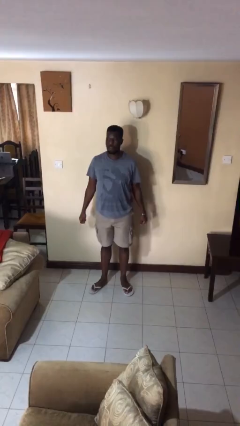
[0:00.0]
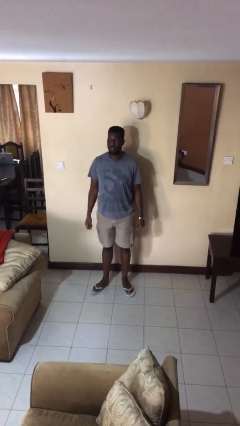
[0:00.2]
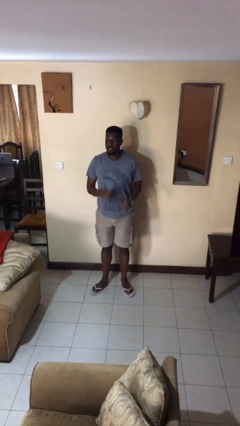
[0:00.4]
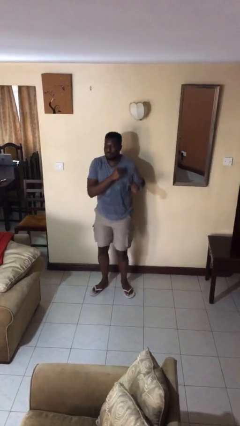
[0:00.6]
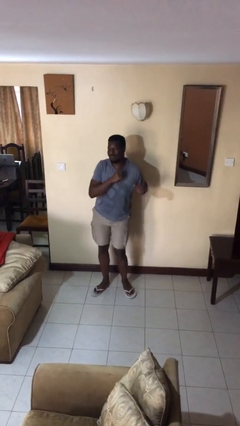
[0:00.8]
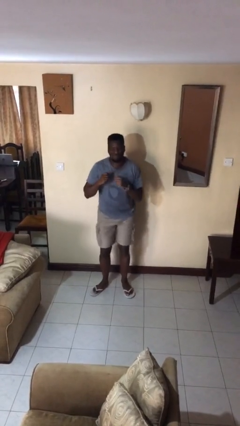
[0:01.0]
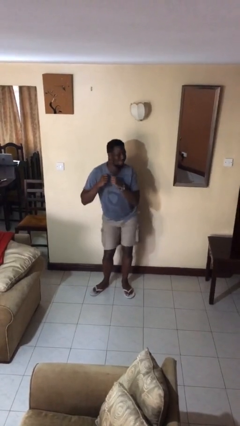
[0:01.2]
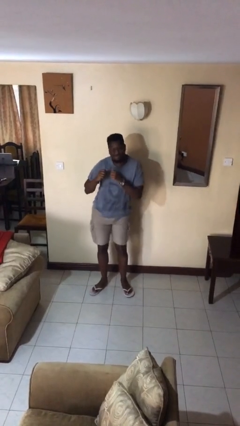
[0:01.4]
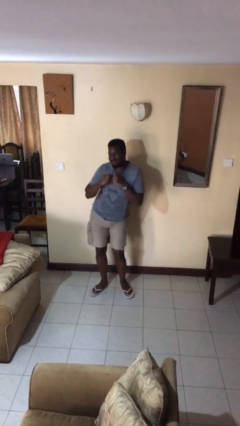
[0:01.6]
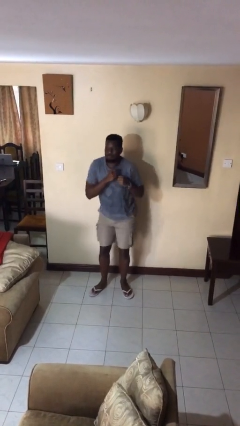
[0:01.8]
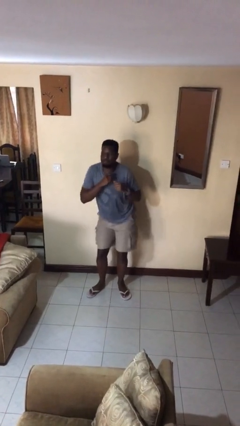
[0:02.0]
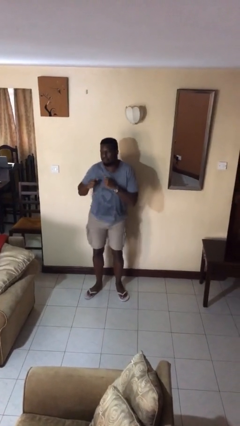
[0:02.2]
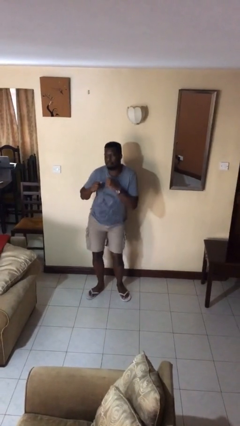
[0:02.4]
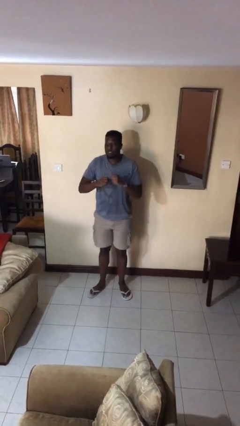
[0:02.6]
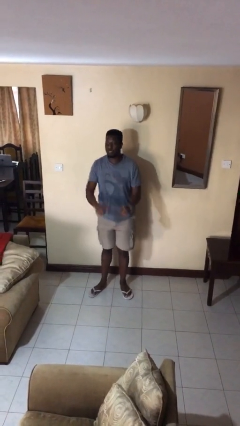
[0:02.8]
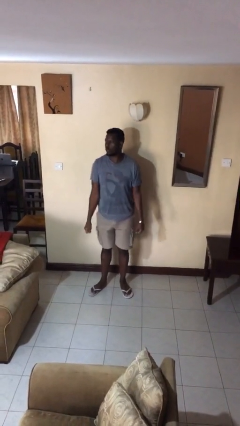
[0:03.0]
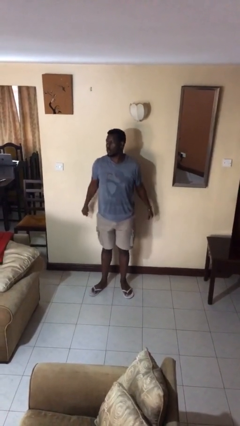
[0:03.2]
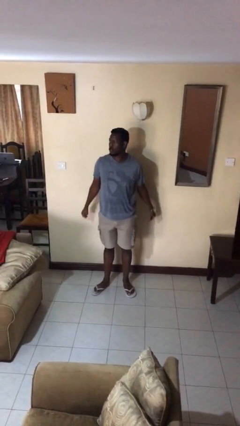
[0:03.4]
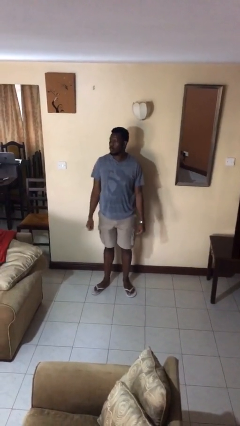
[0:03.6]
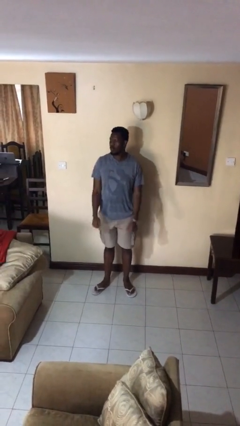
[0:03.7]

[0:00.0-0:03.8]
person wiggles hips

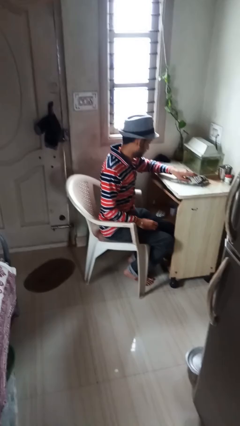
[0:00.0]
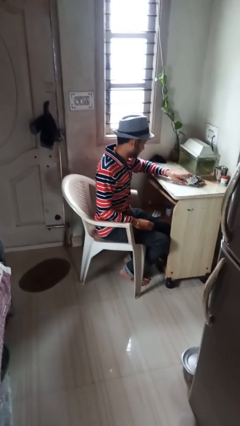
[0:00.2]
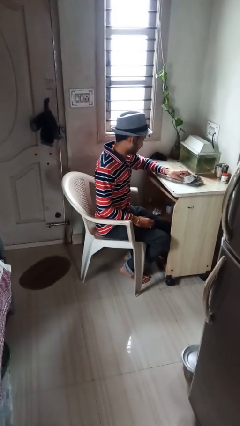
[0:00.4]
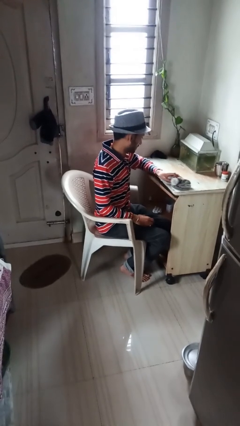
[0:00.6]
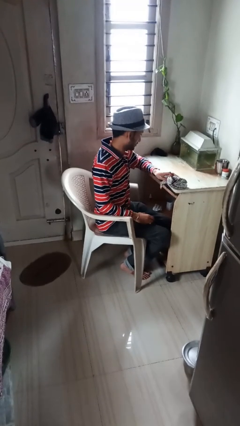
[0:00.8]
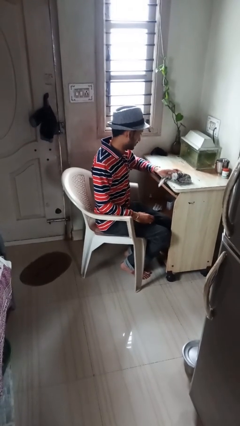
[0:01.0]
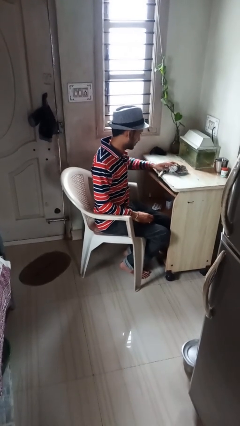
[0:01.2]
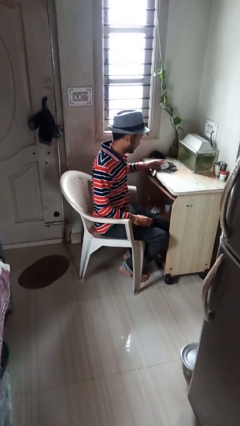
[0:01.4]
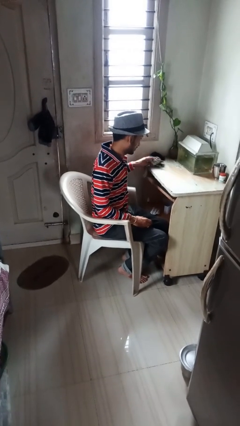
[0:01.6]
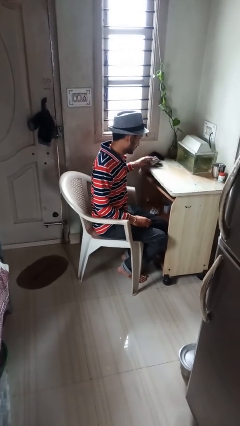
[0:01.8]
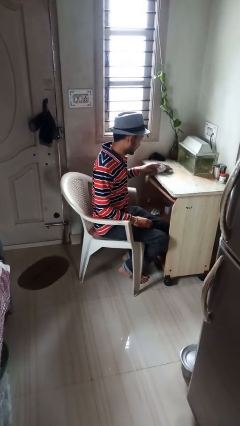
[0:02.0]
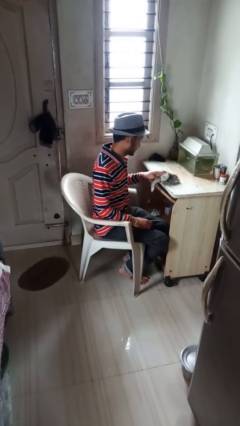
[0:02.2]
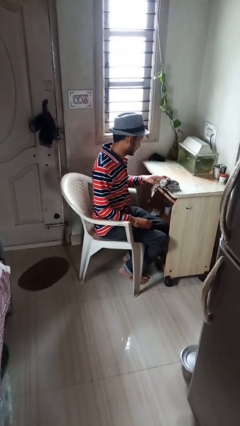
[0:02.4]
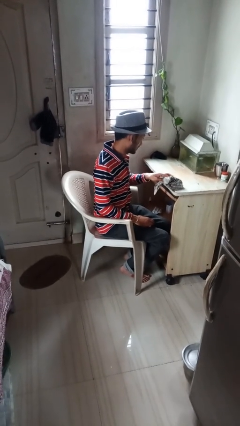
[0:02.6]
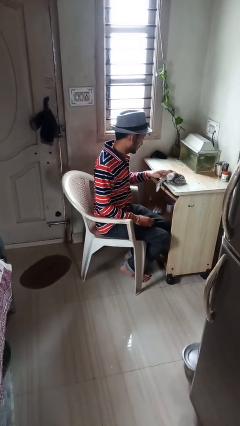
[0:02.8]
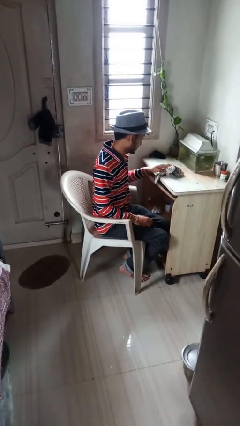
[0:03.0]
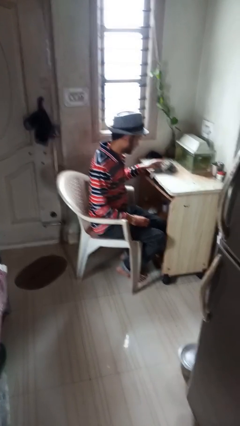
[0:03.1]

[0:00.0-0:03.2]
person cleans table with rag

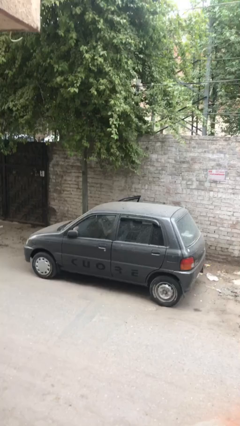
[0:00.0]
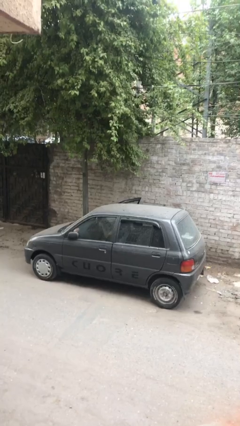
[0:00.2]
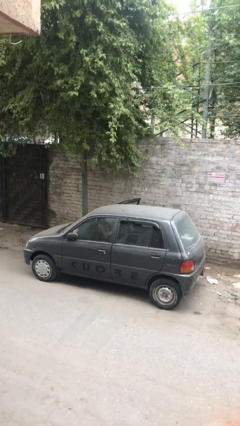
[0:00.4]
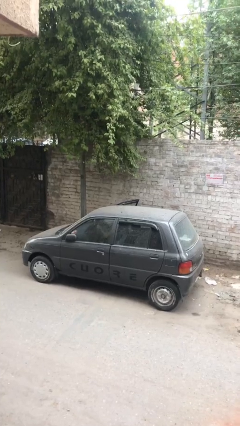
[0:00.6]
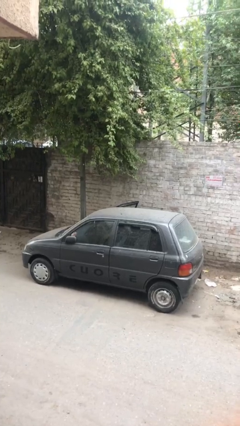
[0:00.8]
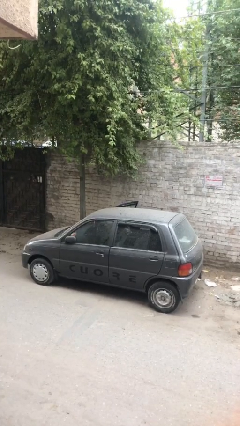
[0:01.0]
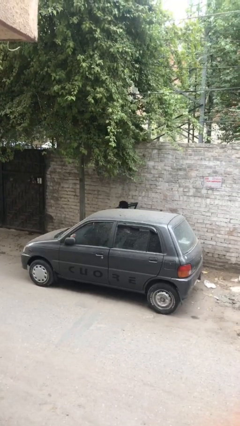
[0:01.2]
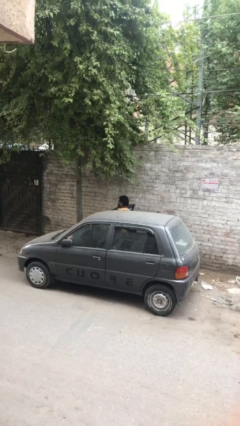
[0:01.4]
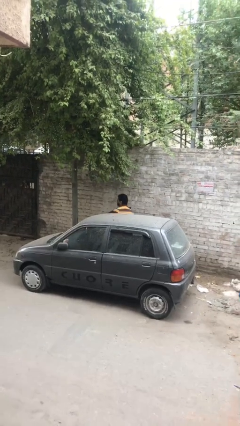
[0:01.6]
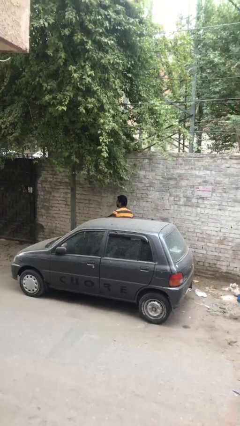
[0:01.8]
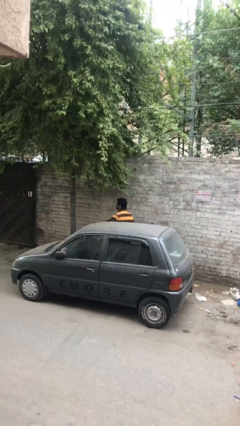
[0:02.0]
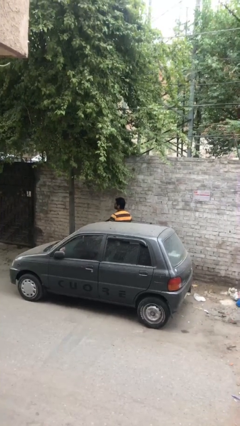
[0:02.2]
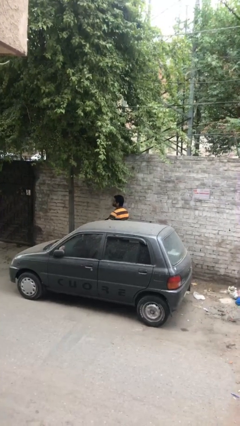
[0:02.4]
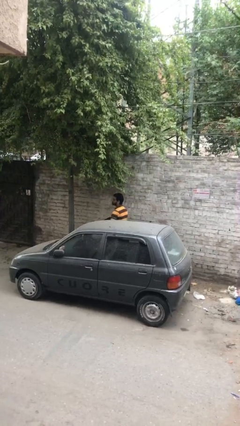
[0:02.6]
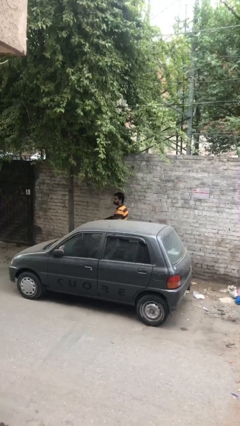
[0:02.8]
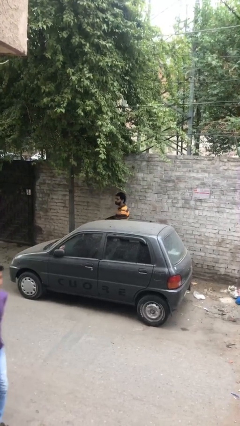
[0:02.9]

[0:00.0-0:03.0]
person exits car

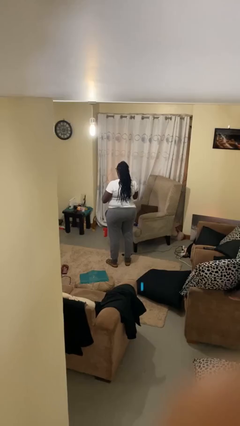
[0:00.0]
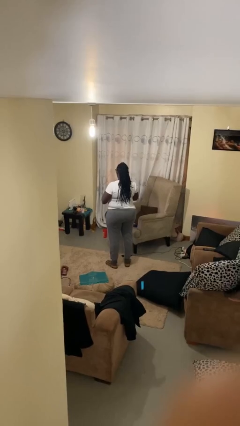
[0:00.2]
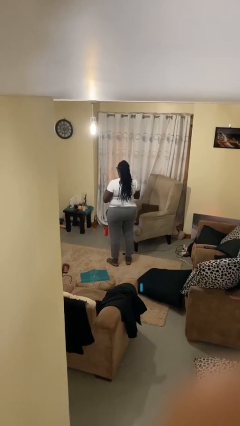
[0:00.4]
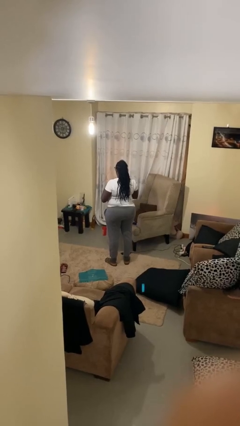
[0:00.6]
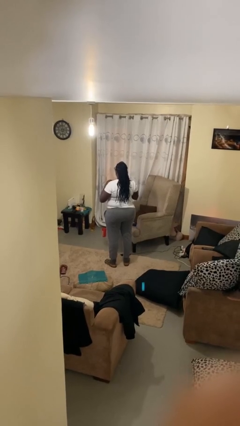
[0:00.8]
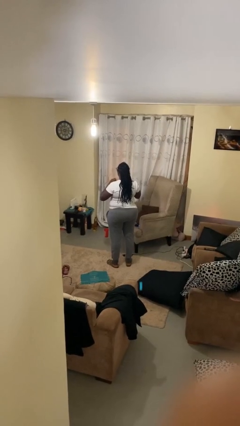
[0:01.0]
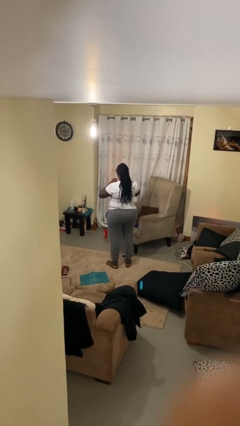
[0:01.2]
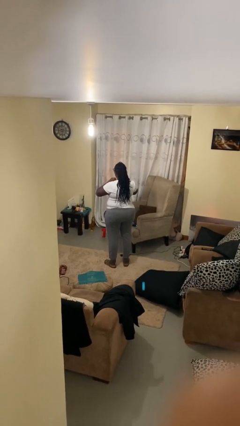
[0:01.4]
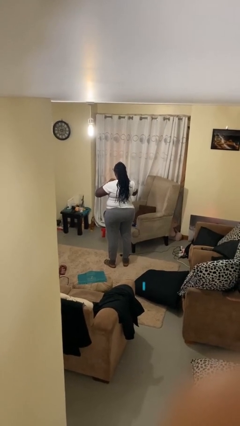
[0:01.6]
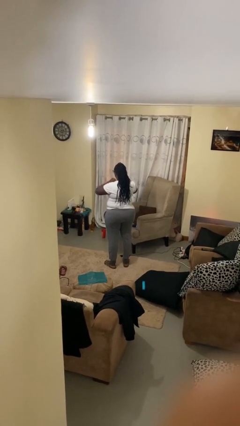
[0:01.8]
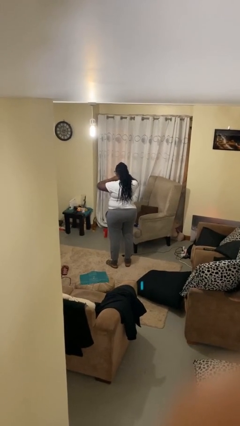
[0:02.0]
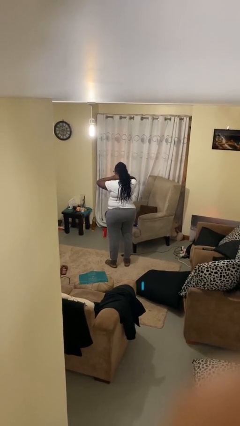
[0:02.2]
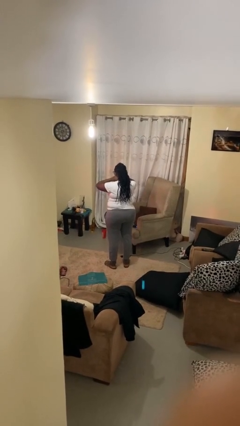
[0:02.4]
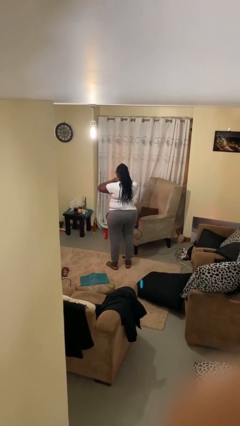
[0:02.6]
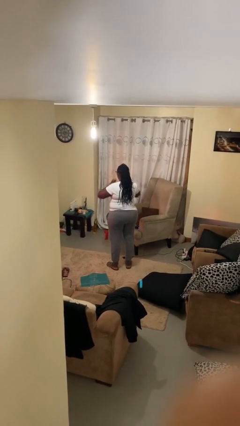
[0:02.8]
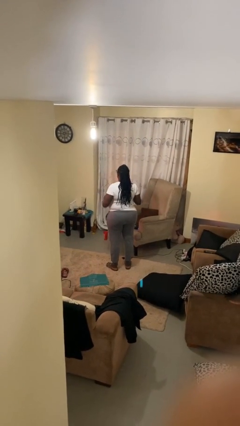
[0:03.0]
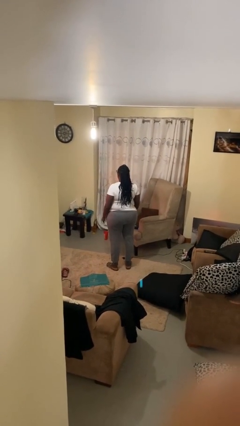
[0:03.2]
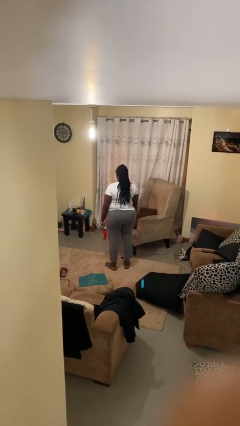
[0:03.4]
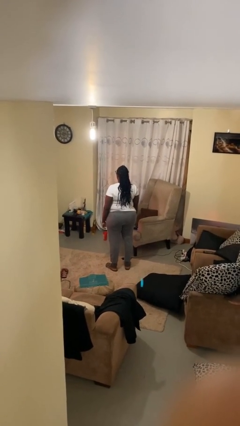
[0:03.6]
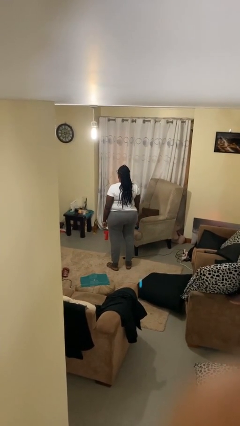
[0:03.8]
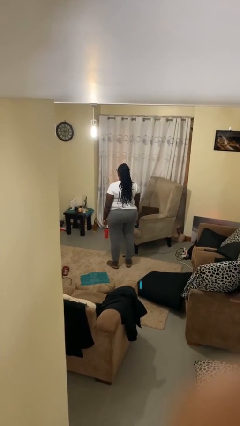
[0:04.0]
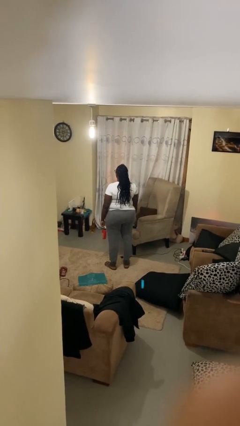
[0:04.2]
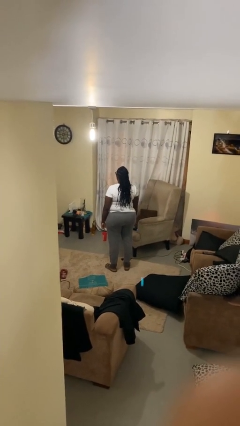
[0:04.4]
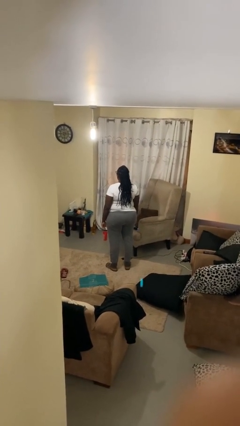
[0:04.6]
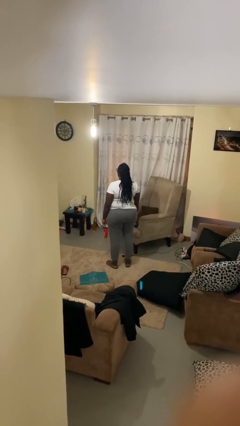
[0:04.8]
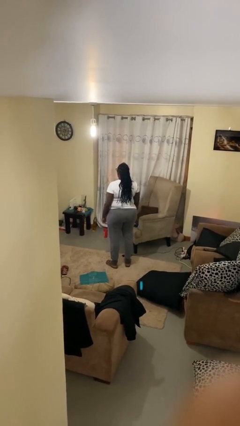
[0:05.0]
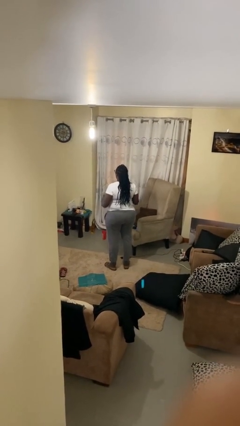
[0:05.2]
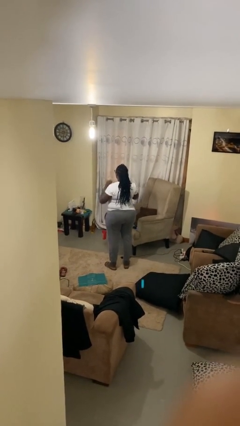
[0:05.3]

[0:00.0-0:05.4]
person puts on necklace

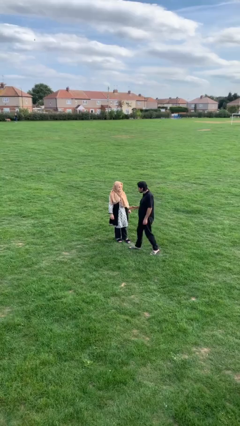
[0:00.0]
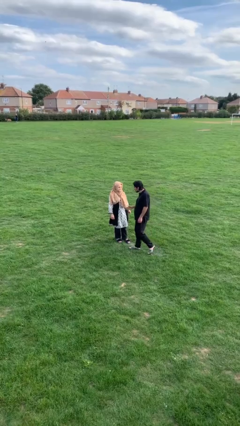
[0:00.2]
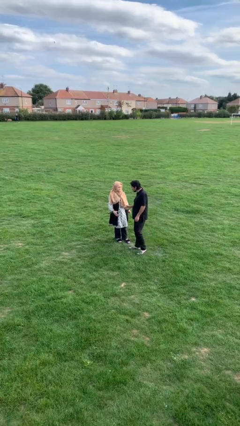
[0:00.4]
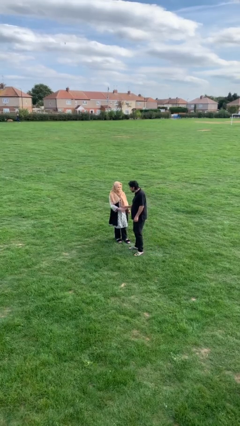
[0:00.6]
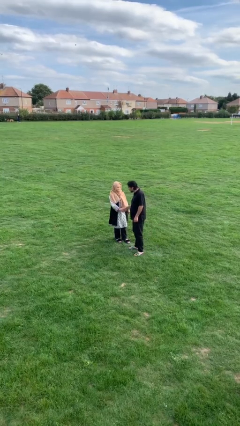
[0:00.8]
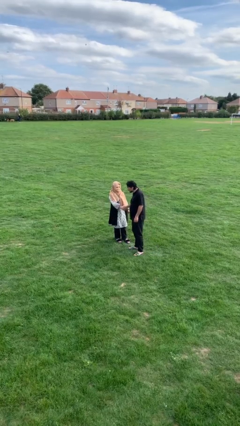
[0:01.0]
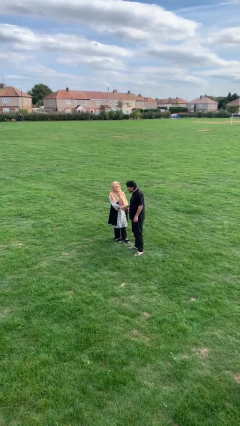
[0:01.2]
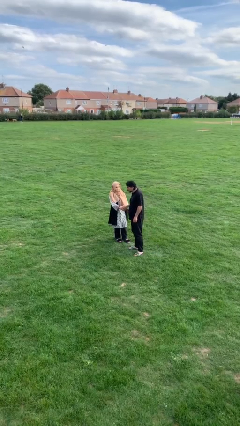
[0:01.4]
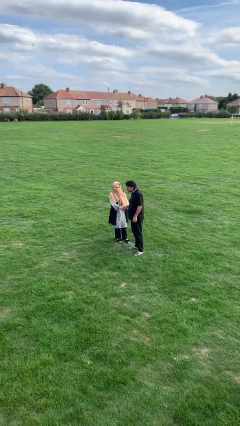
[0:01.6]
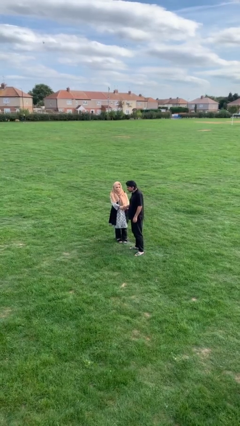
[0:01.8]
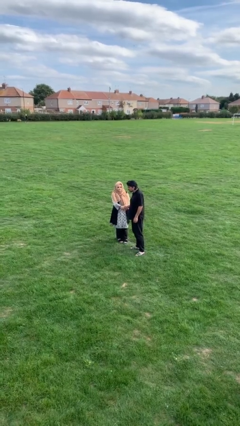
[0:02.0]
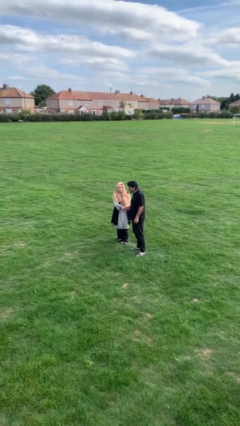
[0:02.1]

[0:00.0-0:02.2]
person shakes hand
